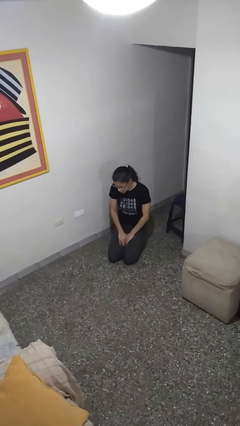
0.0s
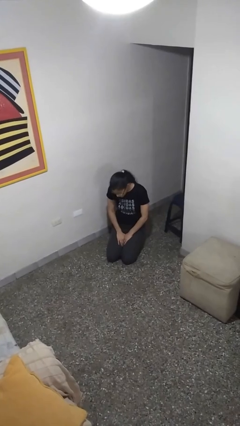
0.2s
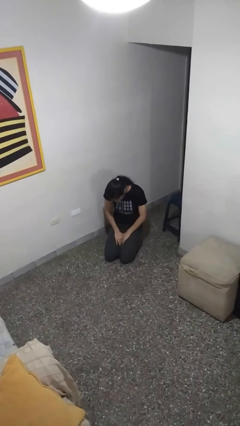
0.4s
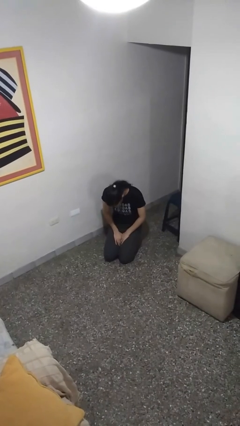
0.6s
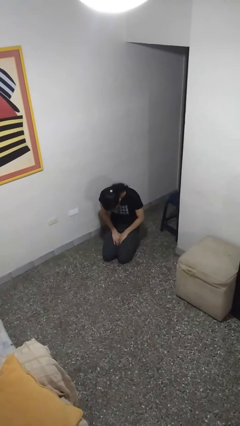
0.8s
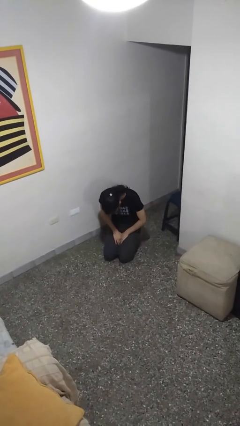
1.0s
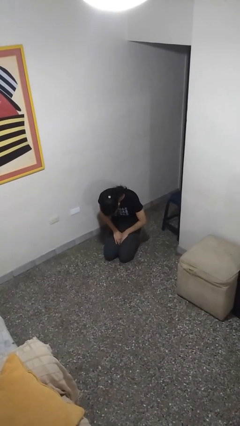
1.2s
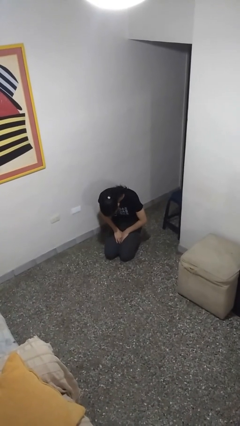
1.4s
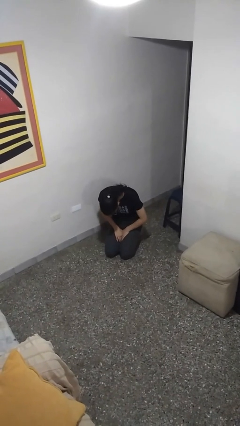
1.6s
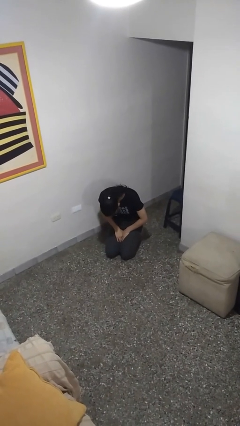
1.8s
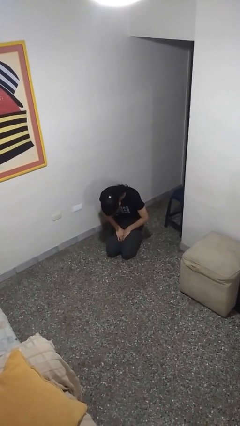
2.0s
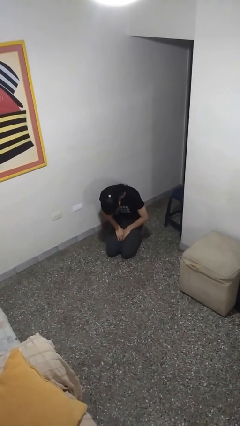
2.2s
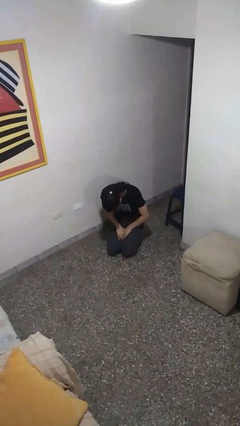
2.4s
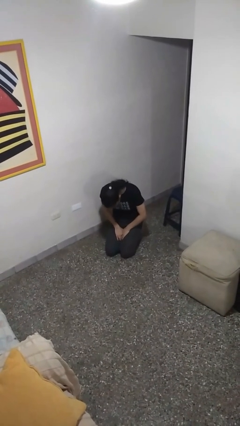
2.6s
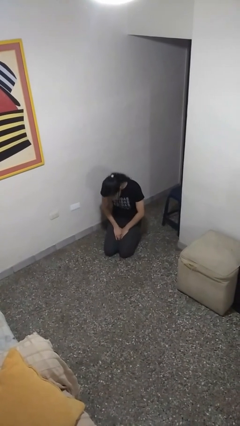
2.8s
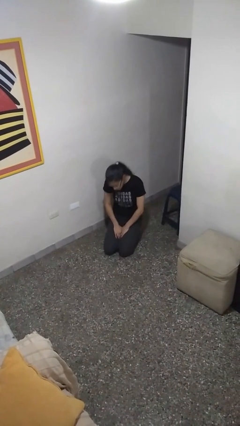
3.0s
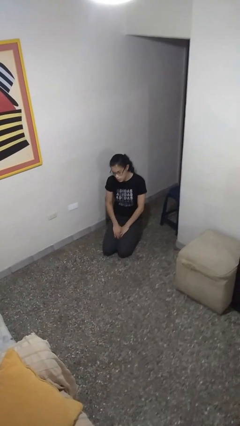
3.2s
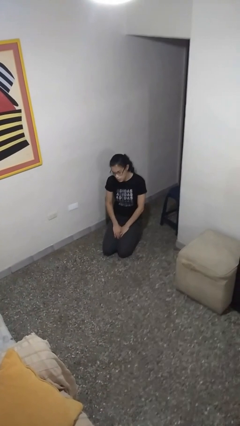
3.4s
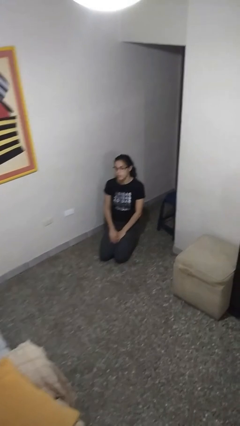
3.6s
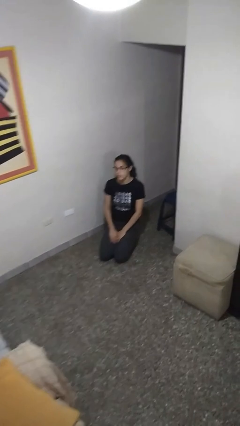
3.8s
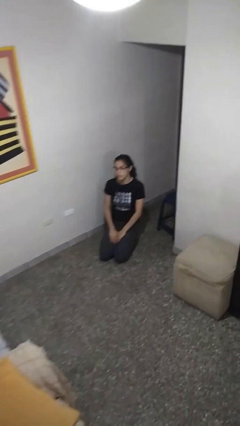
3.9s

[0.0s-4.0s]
person prays

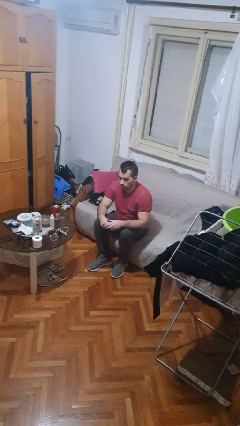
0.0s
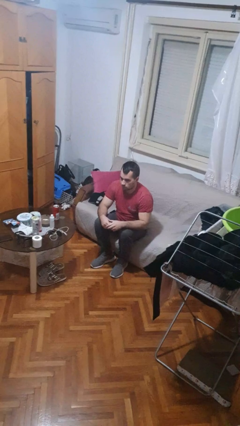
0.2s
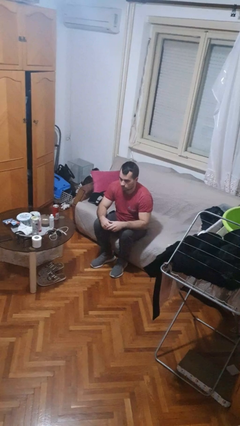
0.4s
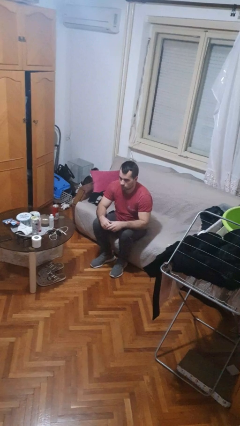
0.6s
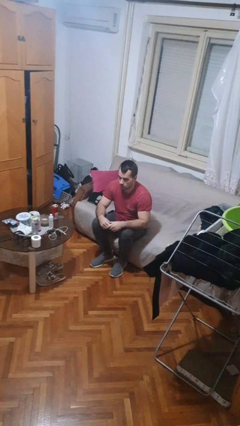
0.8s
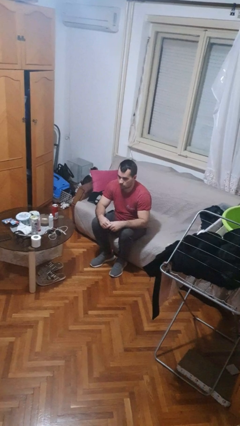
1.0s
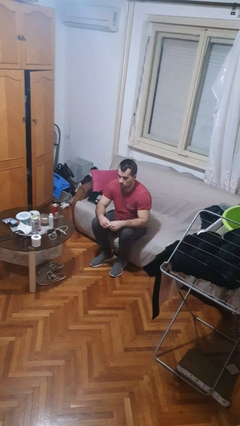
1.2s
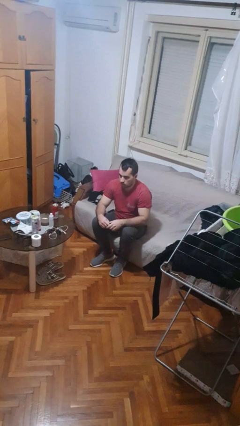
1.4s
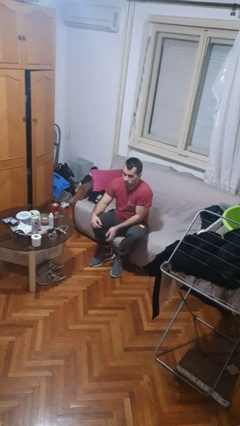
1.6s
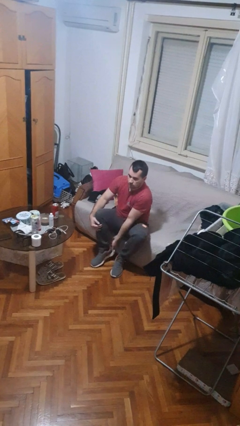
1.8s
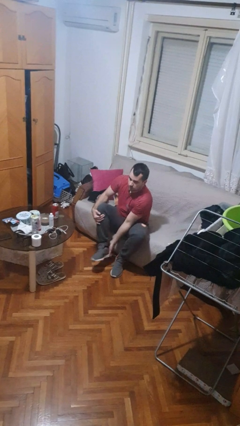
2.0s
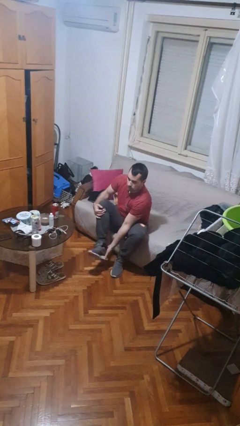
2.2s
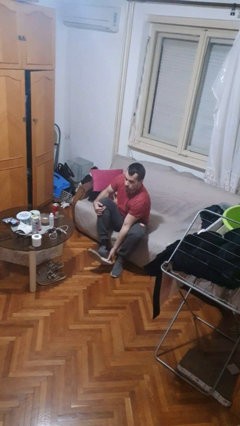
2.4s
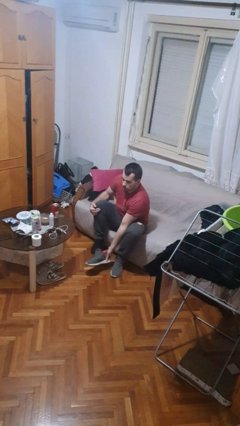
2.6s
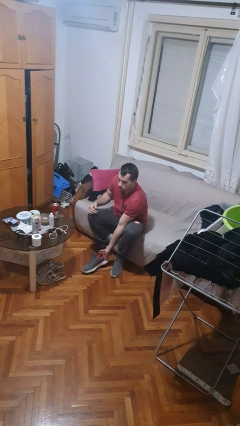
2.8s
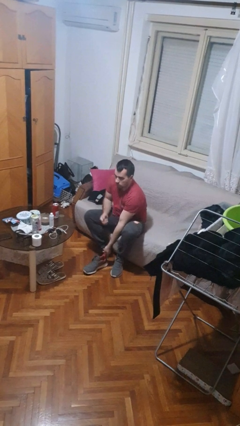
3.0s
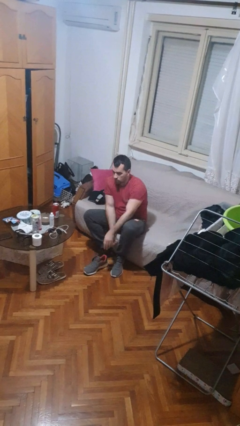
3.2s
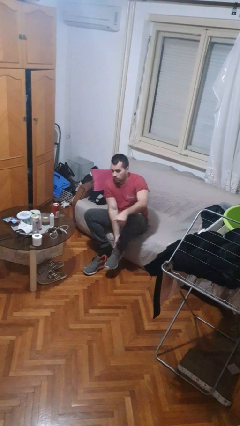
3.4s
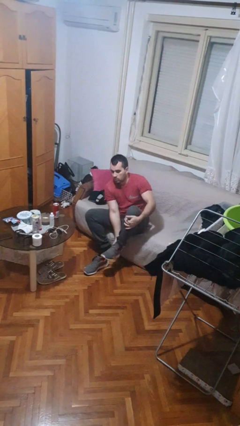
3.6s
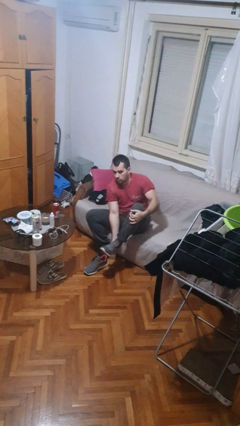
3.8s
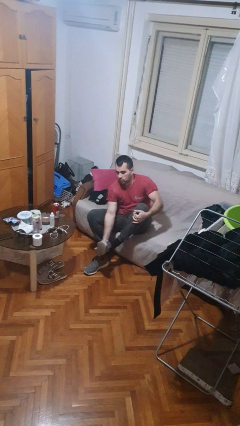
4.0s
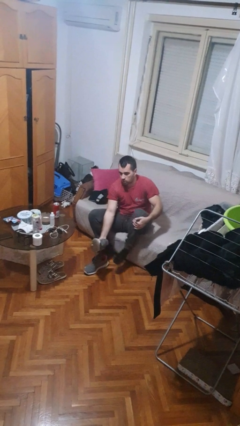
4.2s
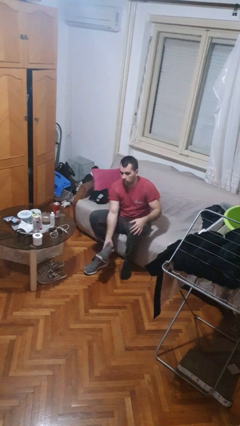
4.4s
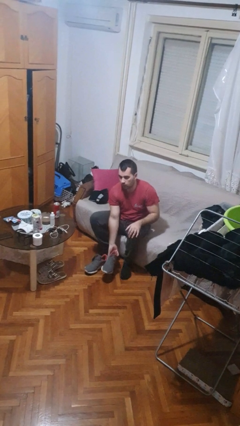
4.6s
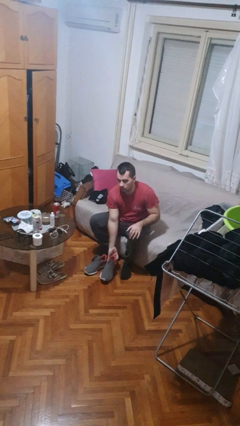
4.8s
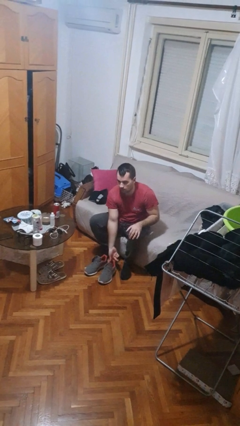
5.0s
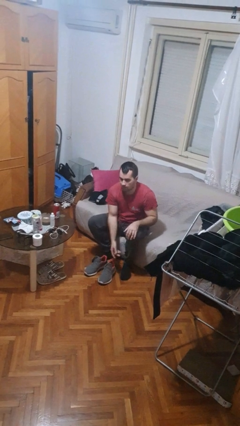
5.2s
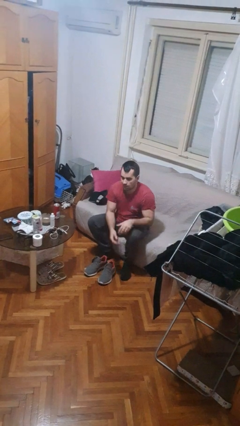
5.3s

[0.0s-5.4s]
person takes off shoes

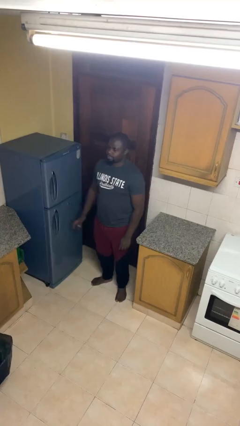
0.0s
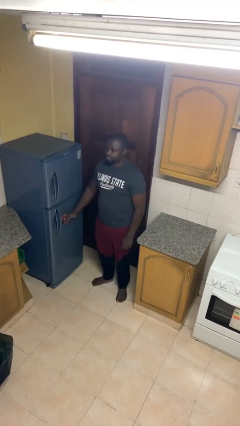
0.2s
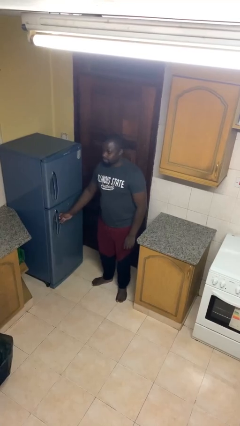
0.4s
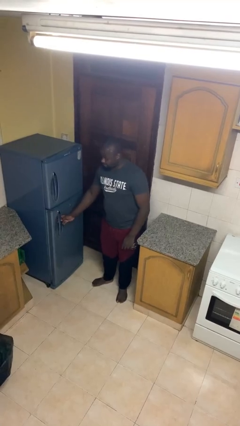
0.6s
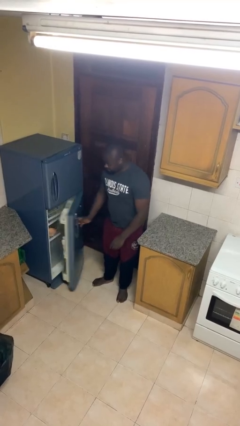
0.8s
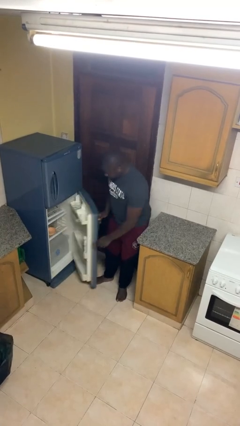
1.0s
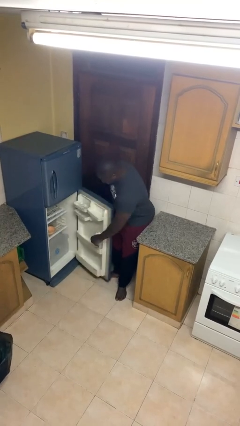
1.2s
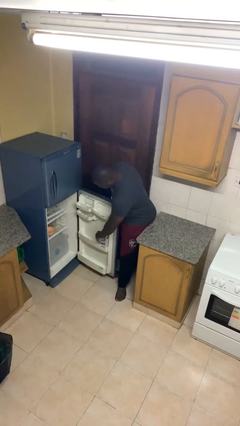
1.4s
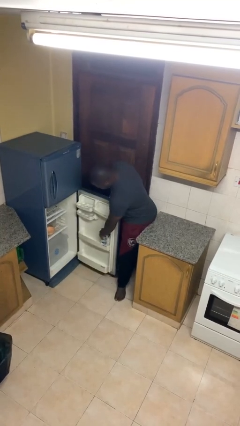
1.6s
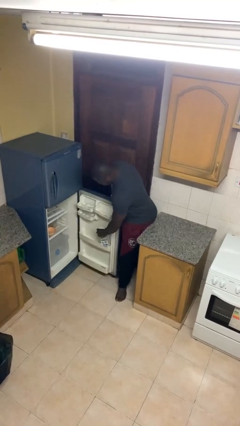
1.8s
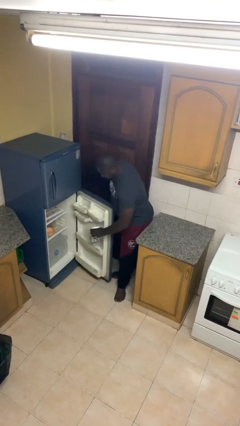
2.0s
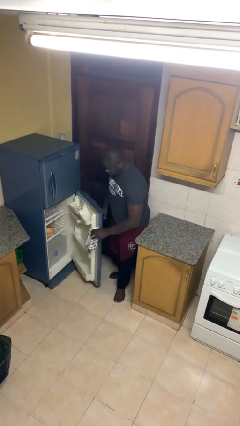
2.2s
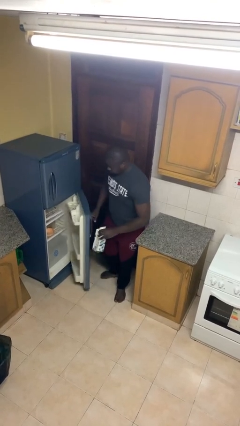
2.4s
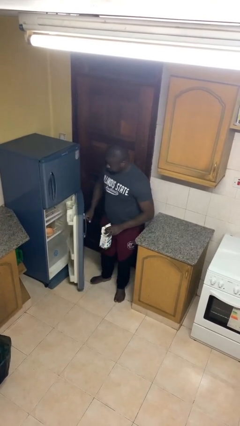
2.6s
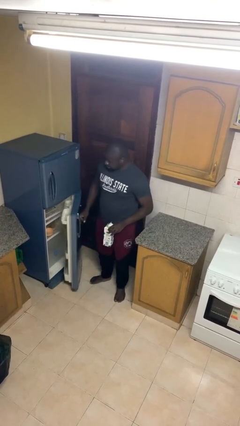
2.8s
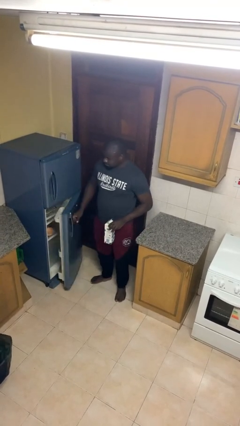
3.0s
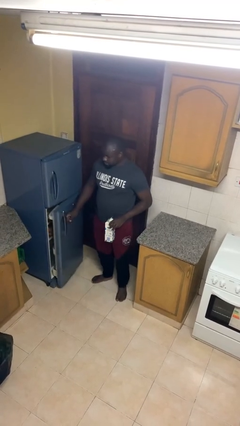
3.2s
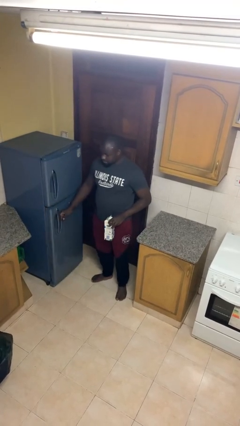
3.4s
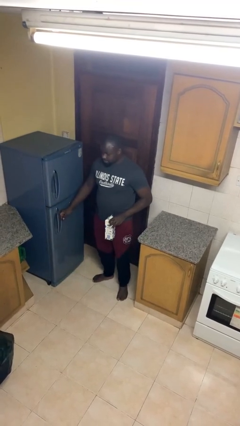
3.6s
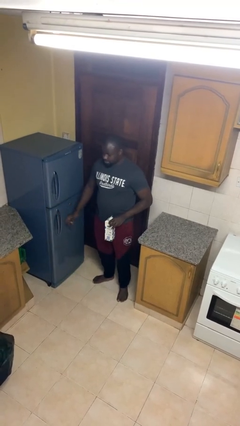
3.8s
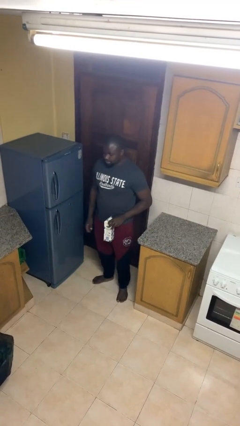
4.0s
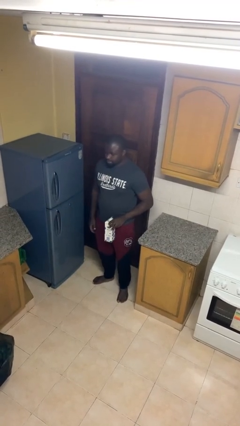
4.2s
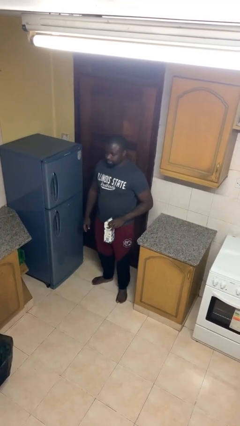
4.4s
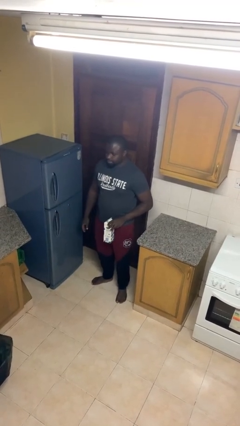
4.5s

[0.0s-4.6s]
person takes object from refrigerator

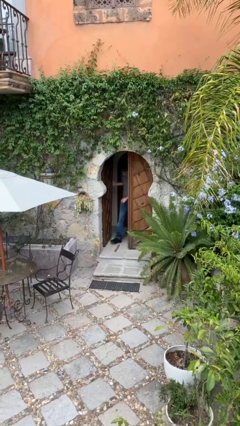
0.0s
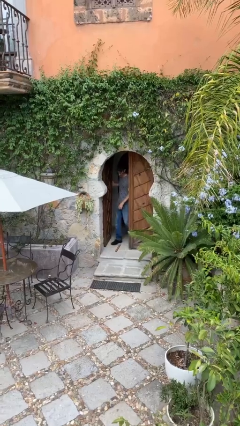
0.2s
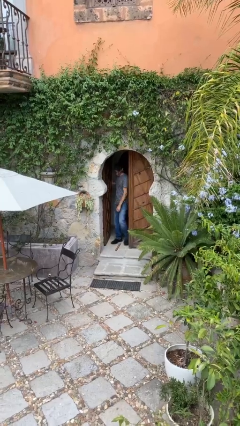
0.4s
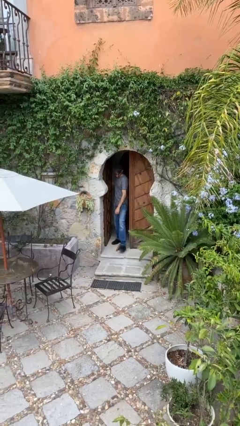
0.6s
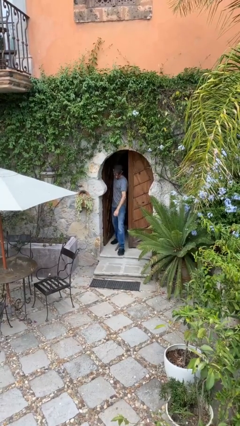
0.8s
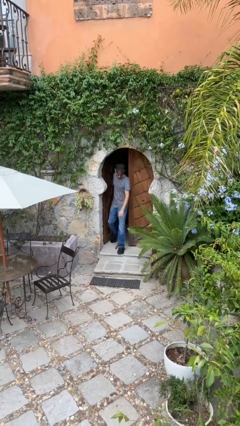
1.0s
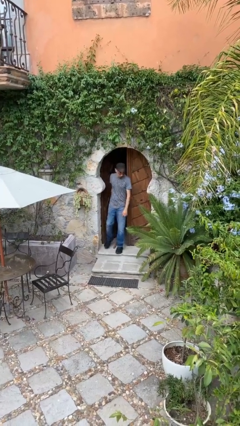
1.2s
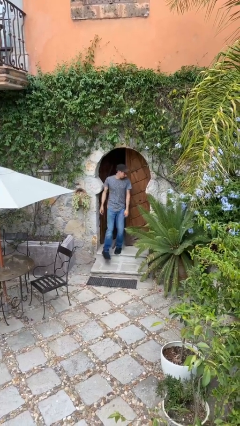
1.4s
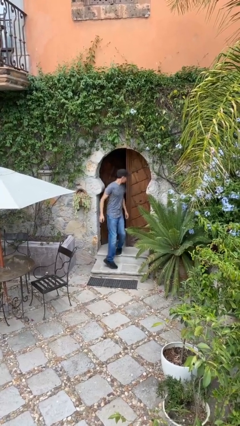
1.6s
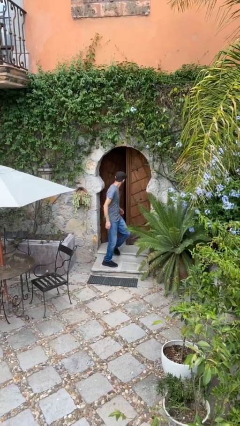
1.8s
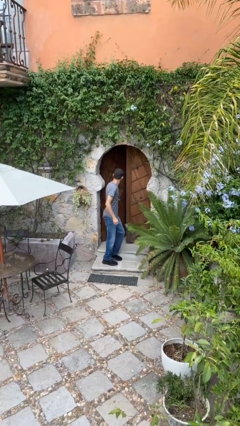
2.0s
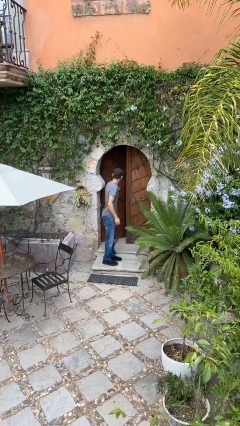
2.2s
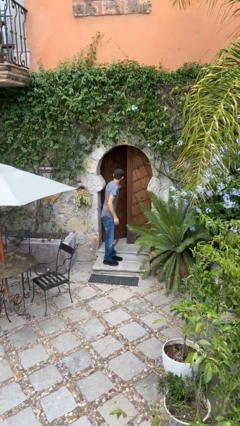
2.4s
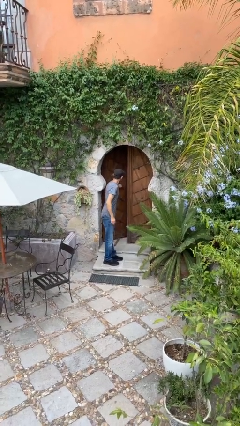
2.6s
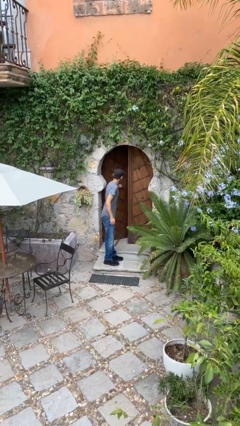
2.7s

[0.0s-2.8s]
person enters scene through structure

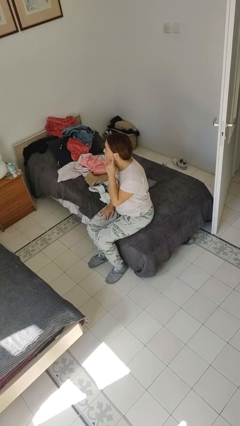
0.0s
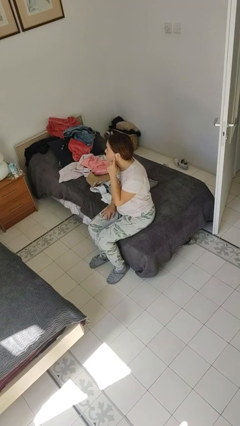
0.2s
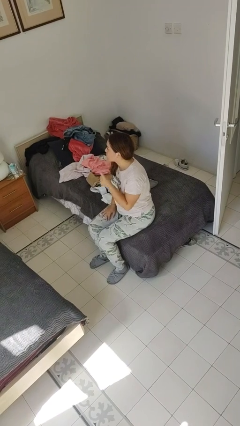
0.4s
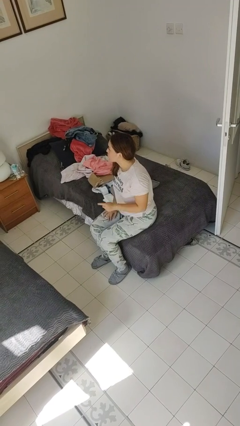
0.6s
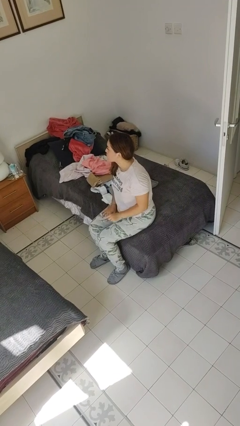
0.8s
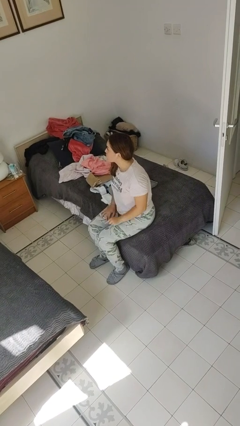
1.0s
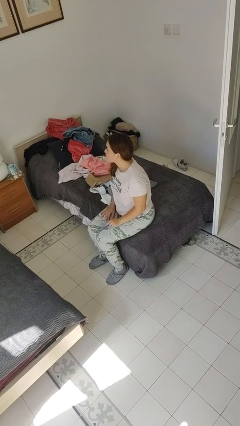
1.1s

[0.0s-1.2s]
person gestures listen closely
